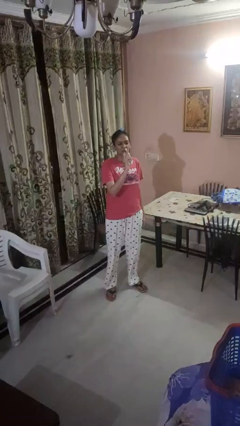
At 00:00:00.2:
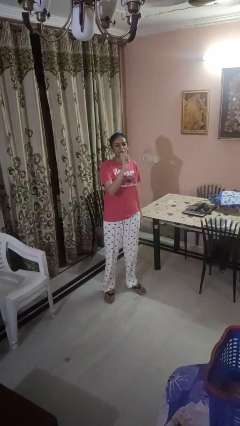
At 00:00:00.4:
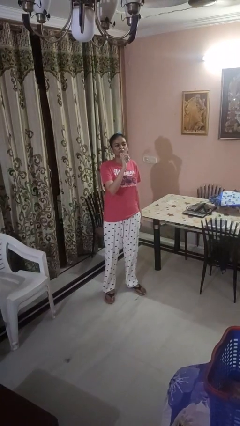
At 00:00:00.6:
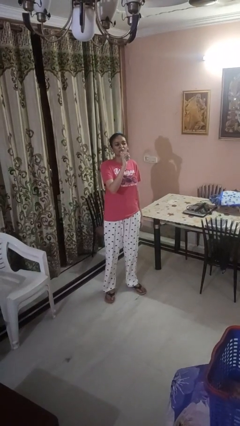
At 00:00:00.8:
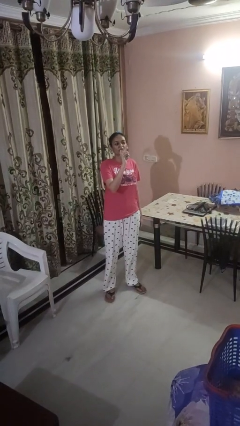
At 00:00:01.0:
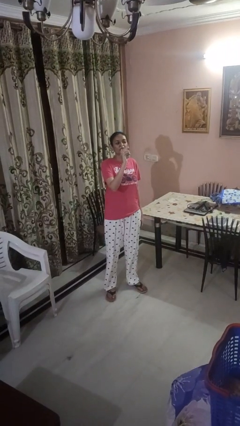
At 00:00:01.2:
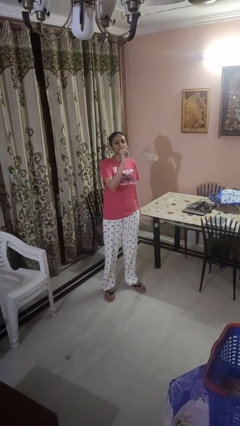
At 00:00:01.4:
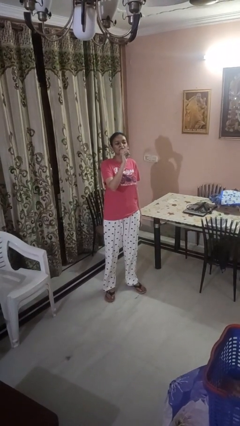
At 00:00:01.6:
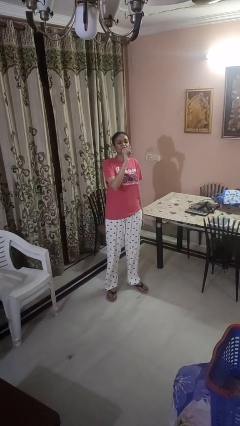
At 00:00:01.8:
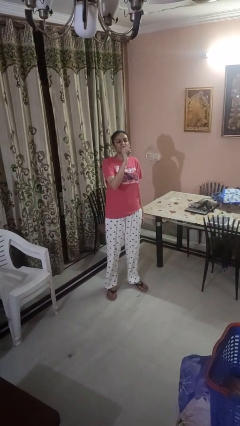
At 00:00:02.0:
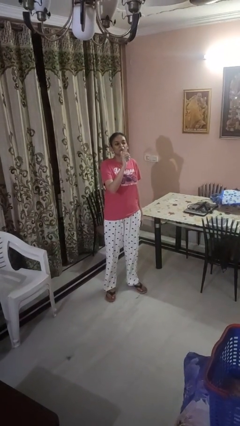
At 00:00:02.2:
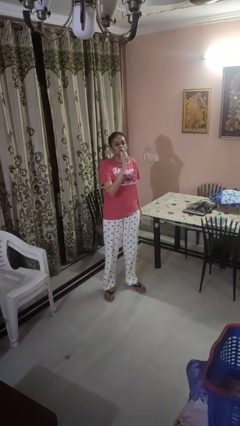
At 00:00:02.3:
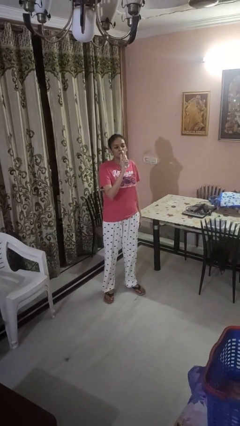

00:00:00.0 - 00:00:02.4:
person drinks from bottle

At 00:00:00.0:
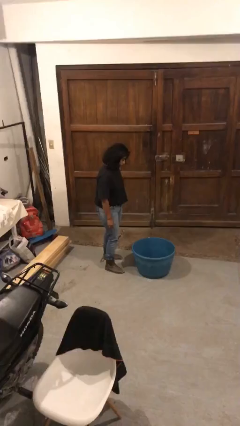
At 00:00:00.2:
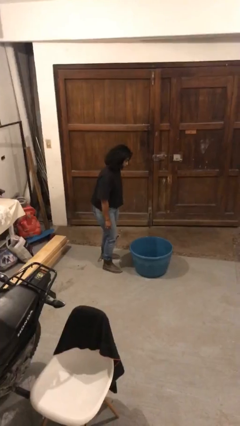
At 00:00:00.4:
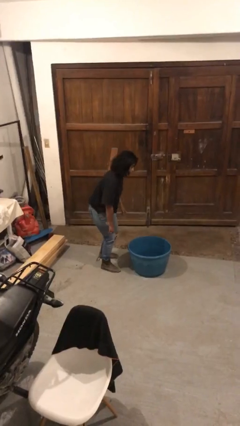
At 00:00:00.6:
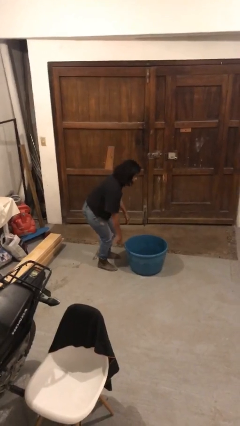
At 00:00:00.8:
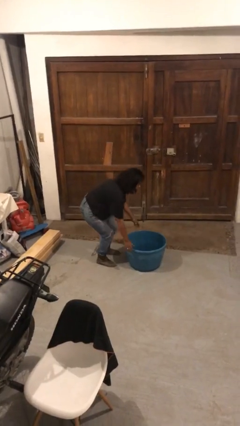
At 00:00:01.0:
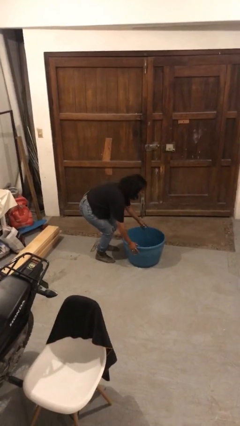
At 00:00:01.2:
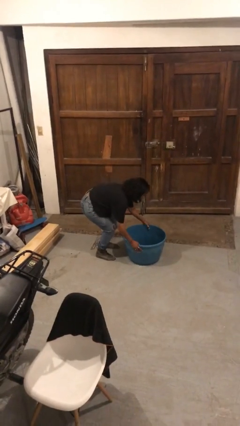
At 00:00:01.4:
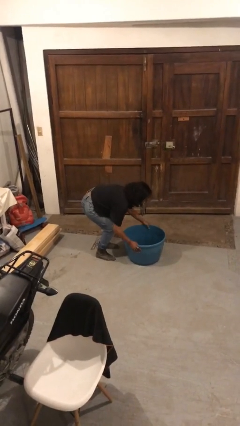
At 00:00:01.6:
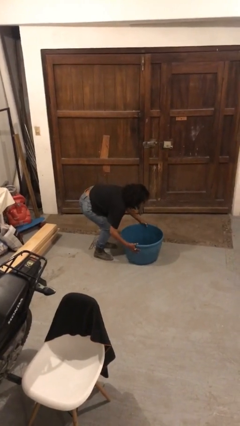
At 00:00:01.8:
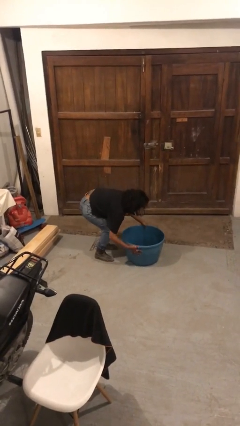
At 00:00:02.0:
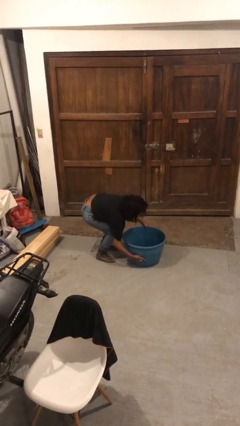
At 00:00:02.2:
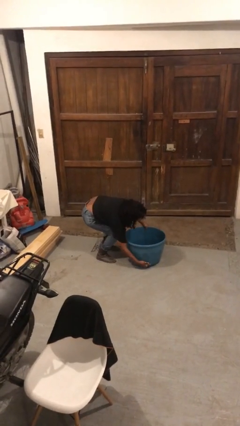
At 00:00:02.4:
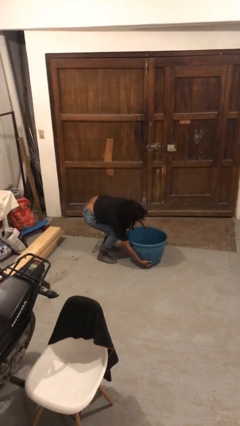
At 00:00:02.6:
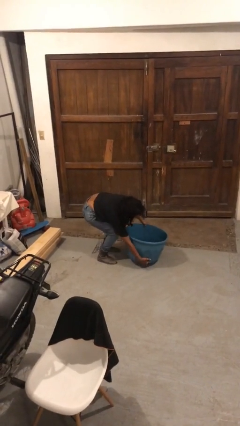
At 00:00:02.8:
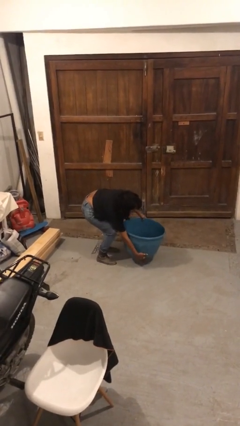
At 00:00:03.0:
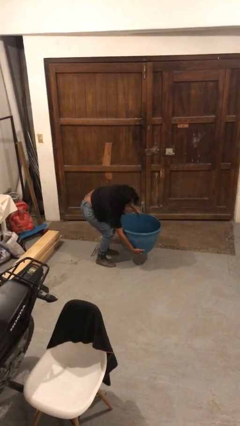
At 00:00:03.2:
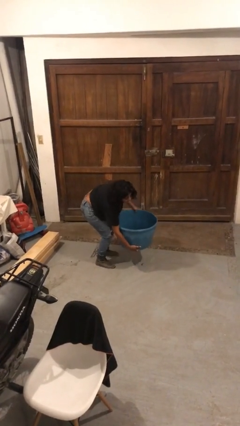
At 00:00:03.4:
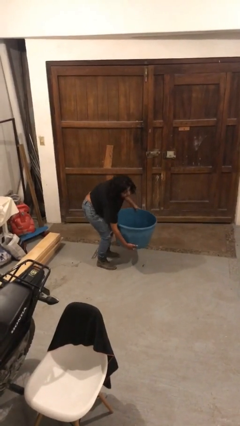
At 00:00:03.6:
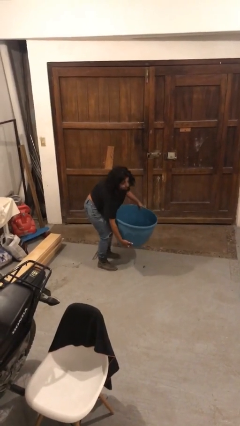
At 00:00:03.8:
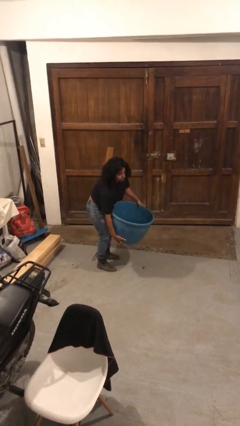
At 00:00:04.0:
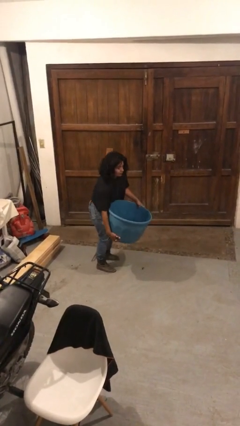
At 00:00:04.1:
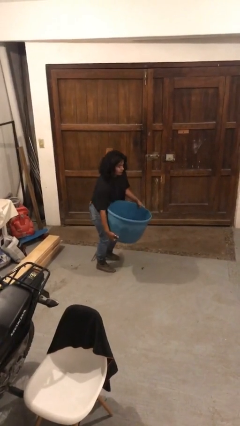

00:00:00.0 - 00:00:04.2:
person picks up object from floor

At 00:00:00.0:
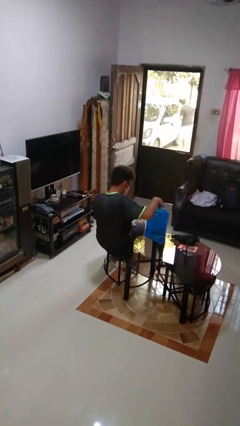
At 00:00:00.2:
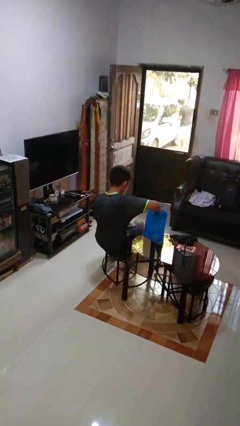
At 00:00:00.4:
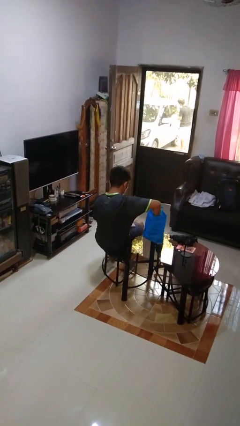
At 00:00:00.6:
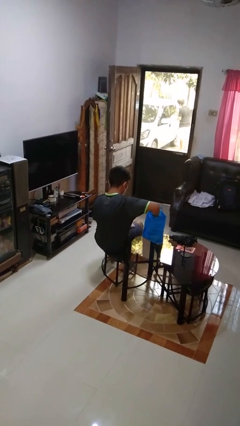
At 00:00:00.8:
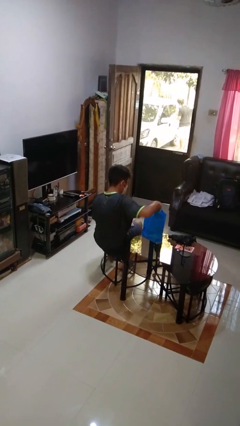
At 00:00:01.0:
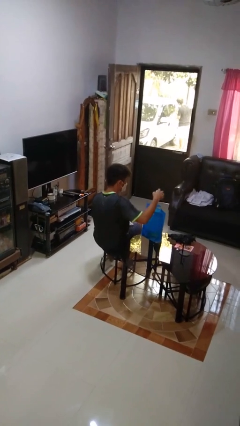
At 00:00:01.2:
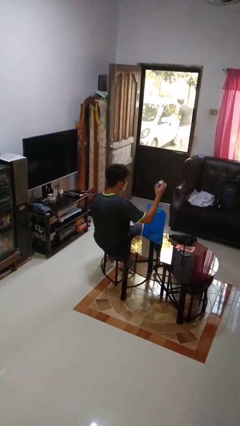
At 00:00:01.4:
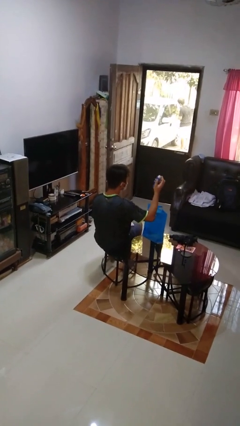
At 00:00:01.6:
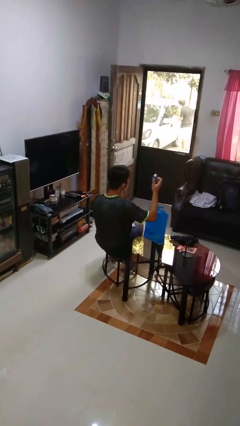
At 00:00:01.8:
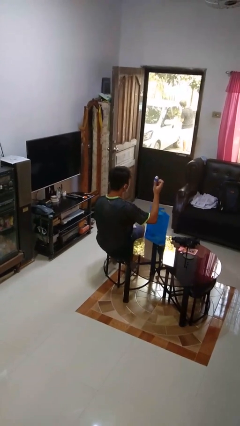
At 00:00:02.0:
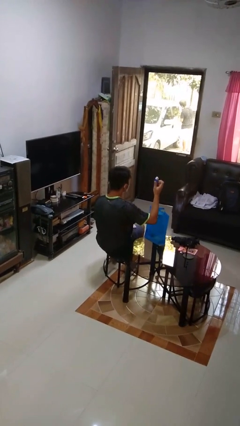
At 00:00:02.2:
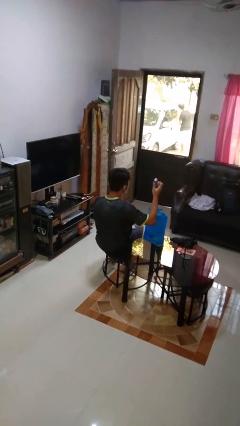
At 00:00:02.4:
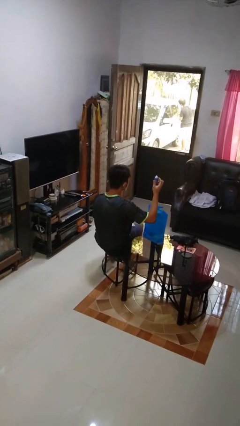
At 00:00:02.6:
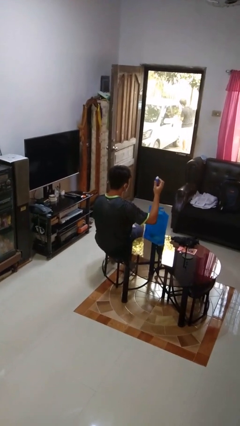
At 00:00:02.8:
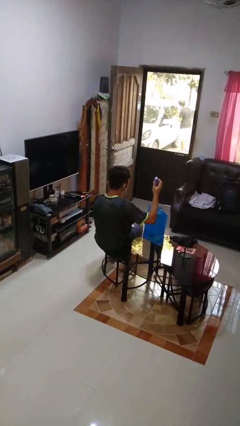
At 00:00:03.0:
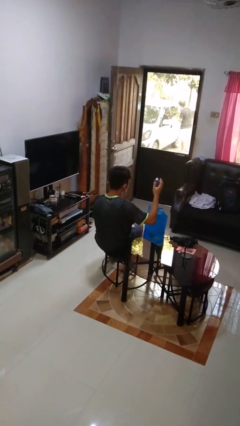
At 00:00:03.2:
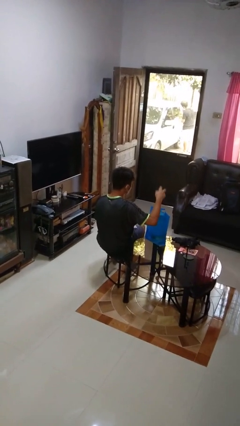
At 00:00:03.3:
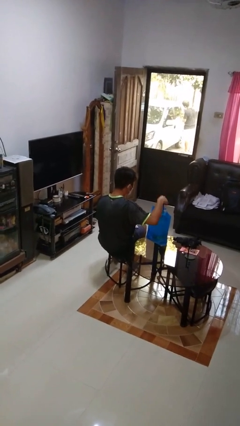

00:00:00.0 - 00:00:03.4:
person takes object from bag

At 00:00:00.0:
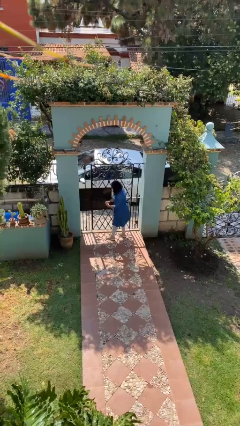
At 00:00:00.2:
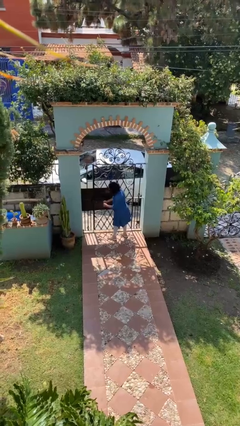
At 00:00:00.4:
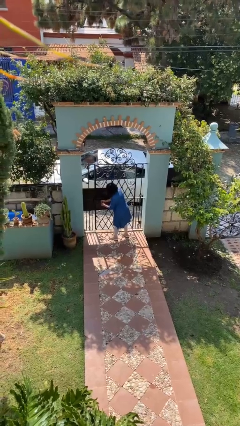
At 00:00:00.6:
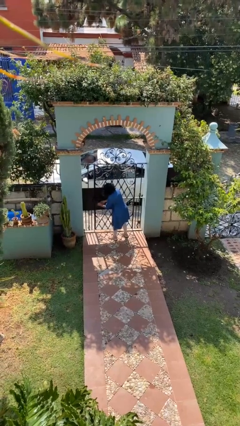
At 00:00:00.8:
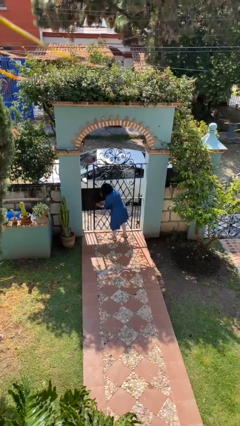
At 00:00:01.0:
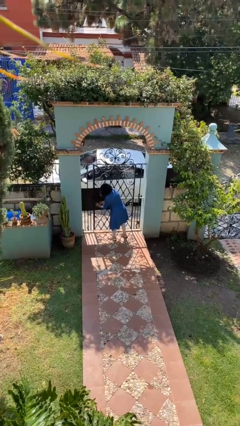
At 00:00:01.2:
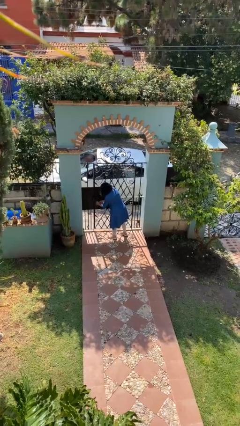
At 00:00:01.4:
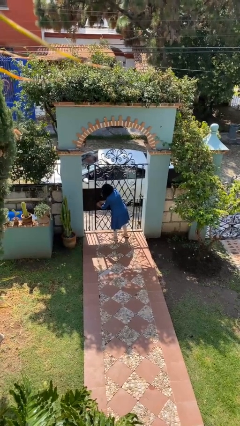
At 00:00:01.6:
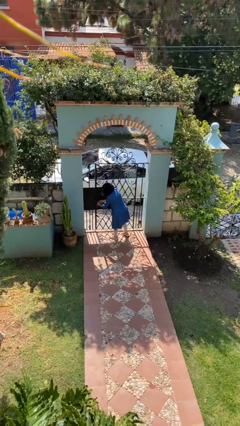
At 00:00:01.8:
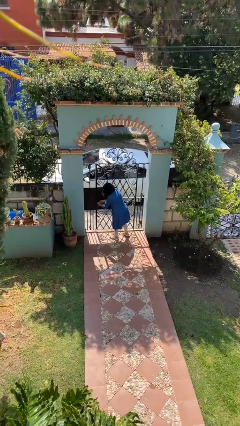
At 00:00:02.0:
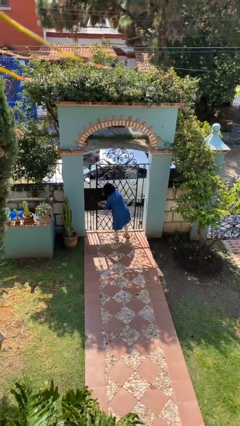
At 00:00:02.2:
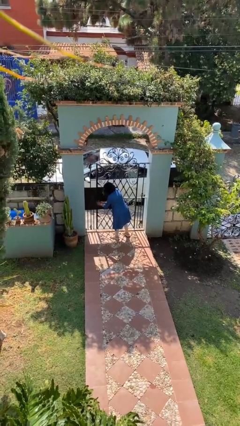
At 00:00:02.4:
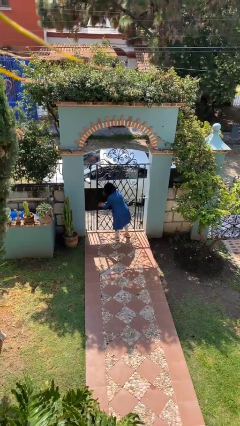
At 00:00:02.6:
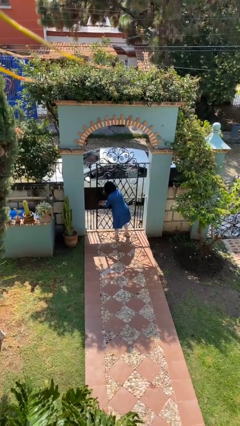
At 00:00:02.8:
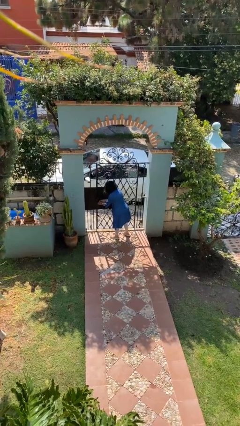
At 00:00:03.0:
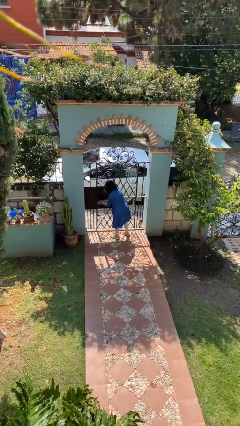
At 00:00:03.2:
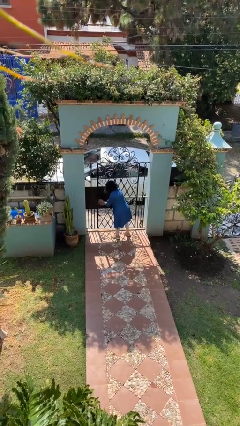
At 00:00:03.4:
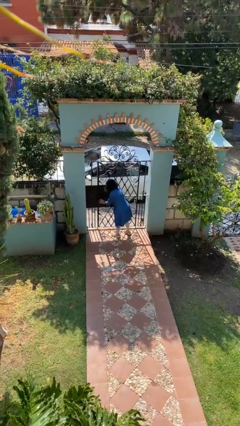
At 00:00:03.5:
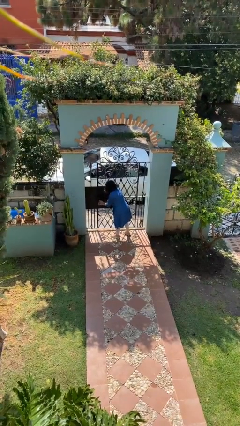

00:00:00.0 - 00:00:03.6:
person unlocks door with keys

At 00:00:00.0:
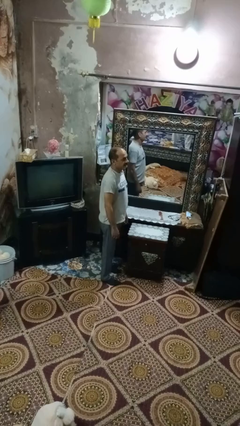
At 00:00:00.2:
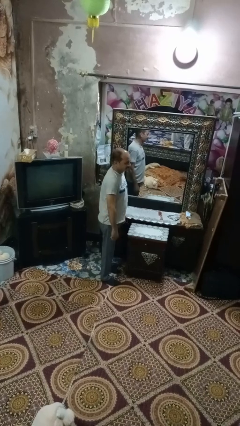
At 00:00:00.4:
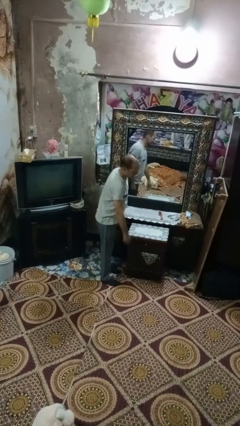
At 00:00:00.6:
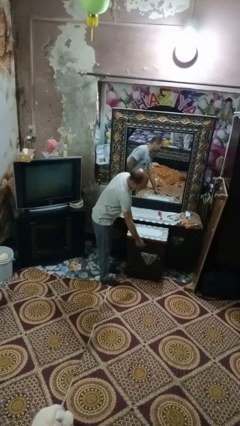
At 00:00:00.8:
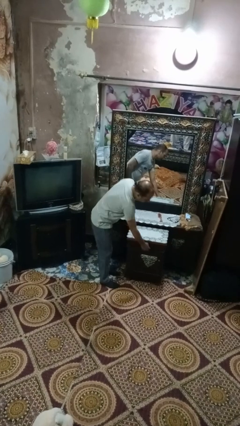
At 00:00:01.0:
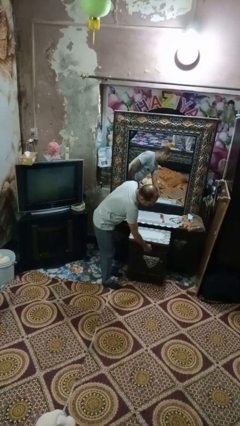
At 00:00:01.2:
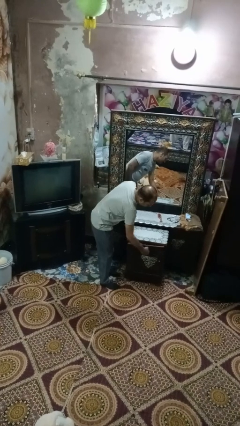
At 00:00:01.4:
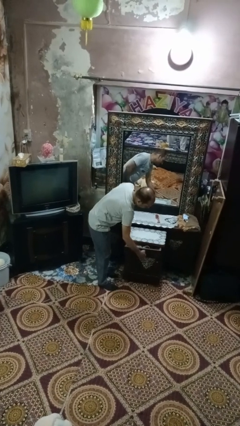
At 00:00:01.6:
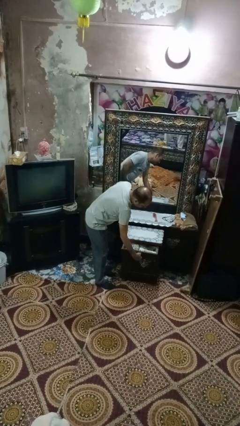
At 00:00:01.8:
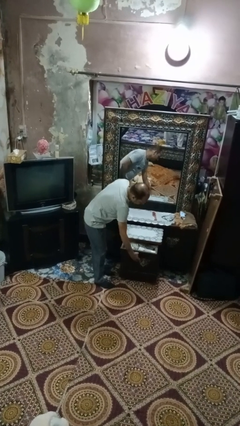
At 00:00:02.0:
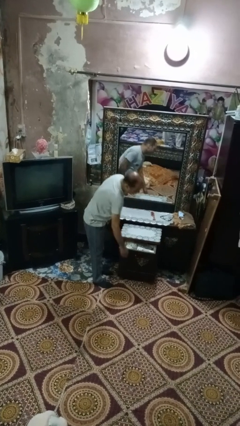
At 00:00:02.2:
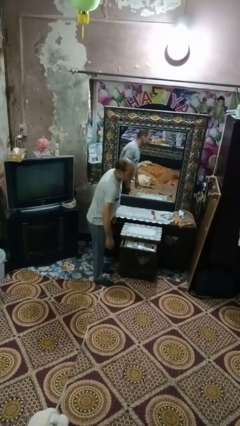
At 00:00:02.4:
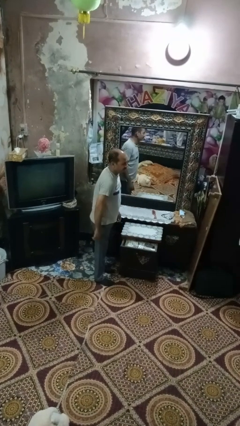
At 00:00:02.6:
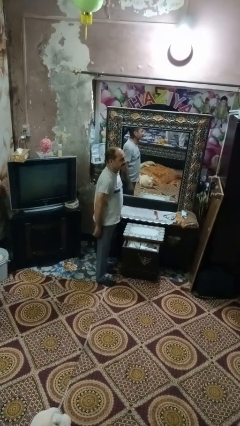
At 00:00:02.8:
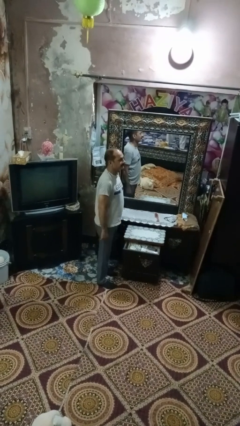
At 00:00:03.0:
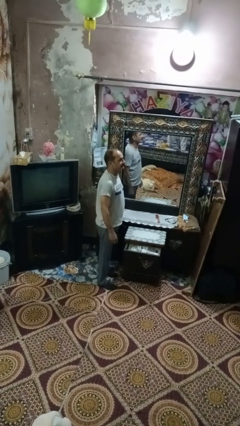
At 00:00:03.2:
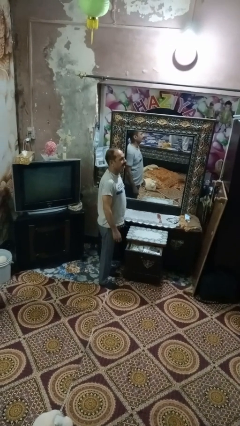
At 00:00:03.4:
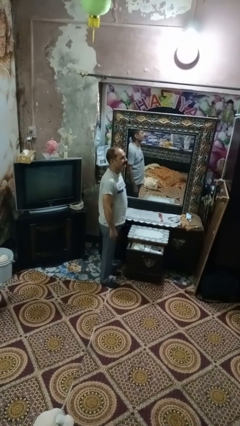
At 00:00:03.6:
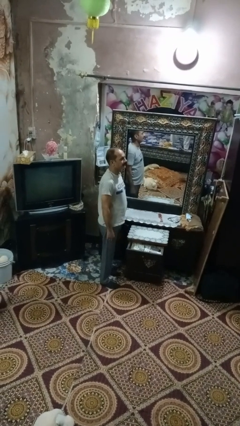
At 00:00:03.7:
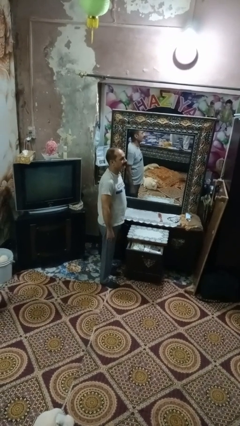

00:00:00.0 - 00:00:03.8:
person opens dresser drawer
